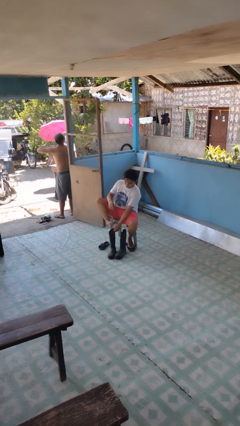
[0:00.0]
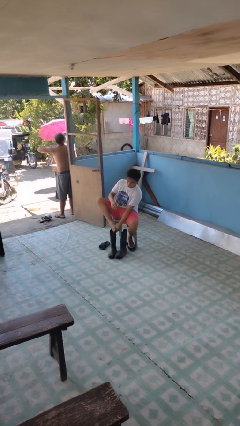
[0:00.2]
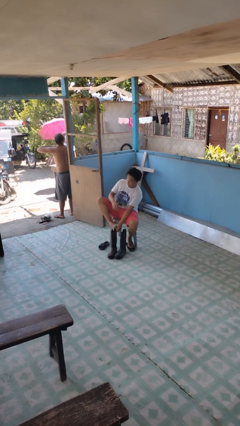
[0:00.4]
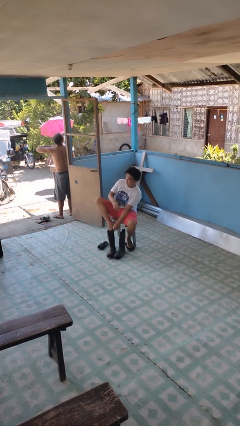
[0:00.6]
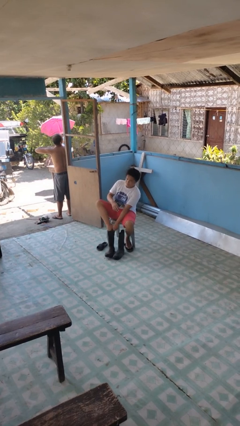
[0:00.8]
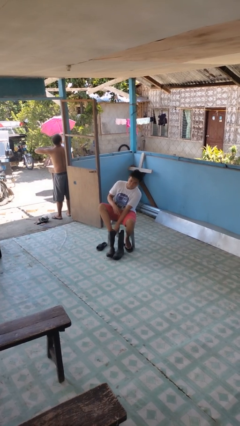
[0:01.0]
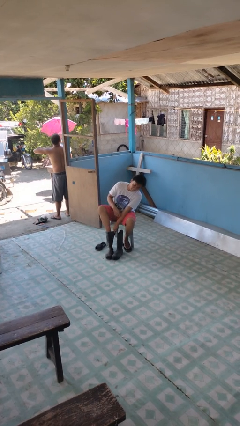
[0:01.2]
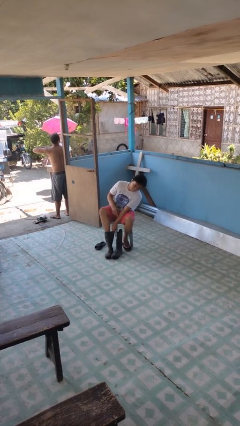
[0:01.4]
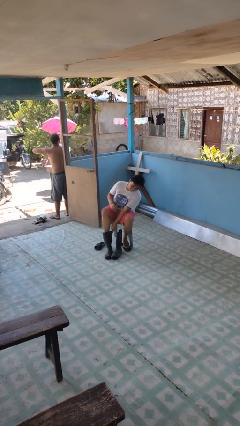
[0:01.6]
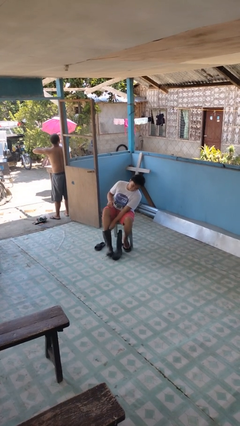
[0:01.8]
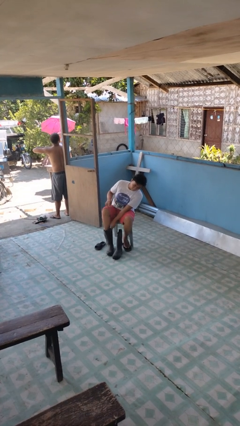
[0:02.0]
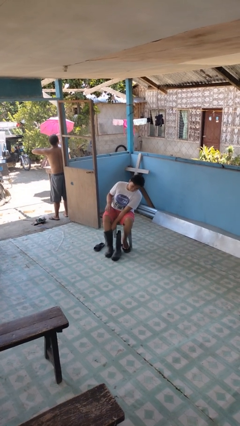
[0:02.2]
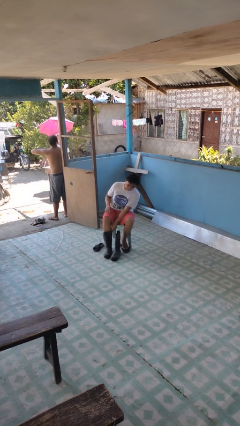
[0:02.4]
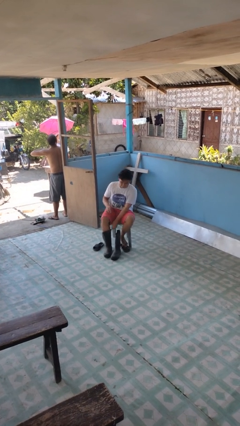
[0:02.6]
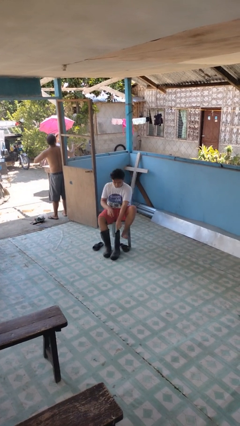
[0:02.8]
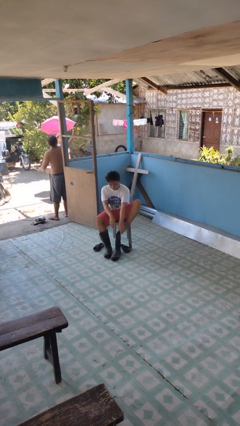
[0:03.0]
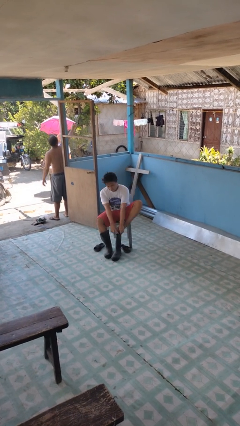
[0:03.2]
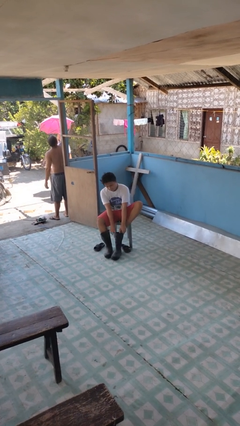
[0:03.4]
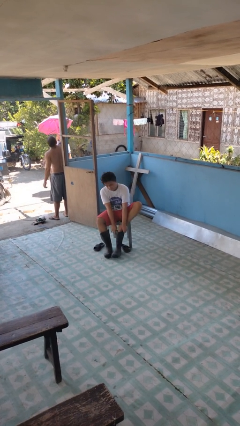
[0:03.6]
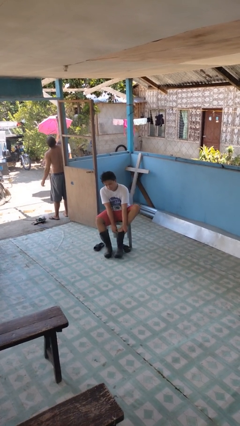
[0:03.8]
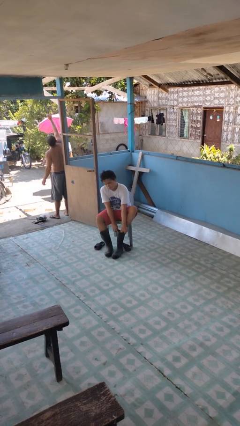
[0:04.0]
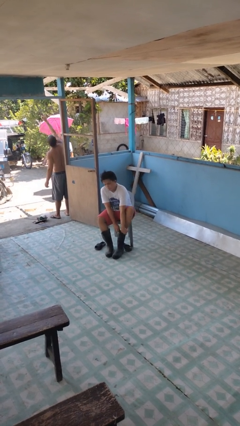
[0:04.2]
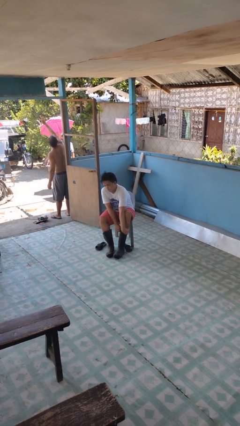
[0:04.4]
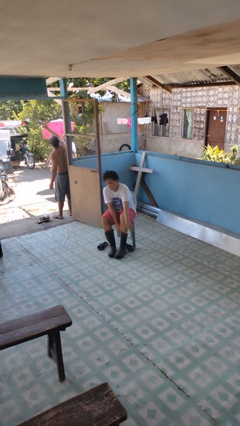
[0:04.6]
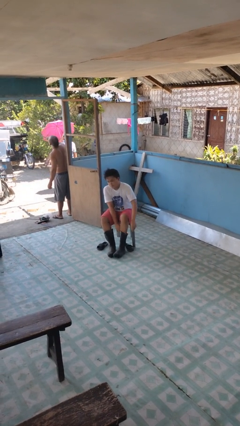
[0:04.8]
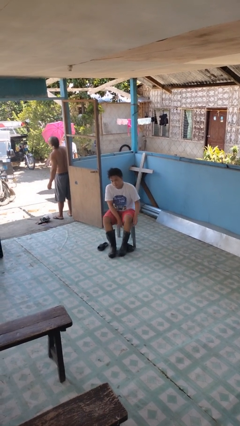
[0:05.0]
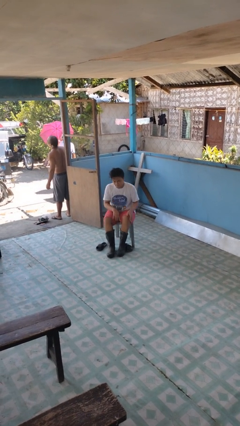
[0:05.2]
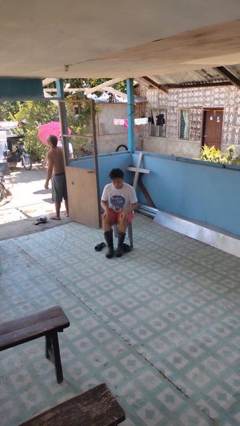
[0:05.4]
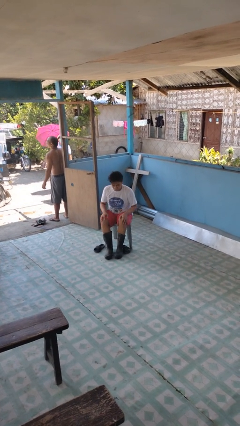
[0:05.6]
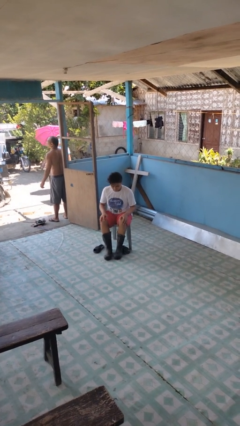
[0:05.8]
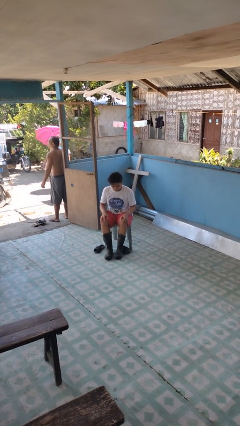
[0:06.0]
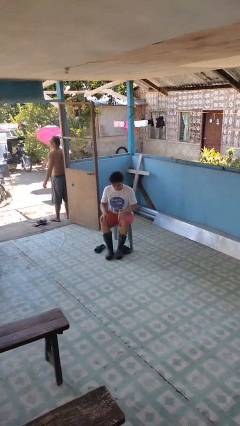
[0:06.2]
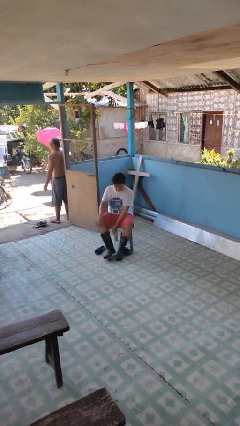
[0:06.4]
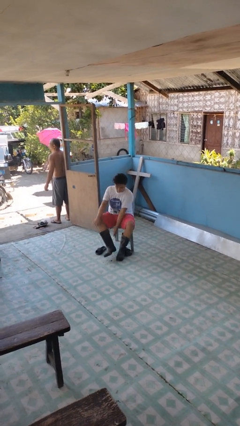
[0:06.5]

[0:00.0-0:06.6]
person puts on boots

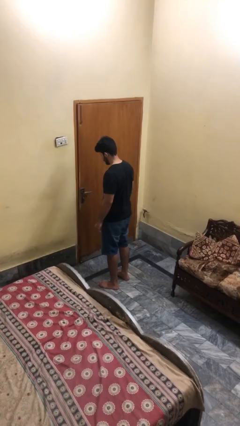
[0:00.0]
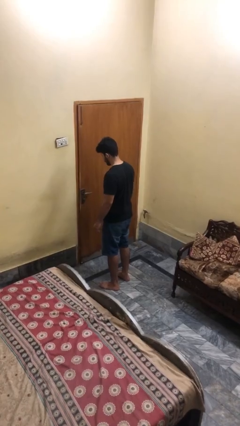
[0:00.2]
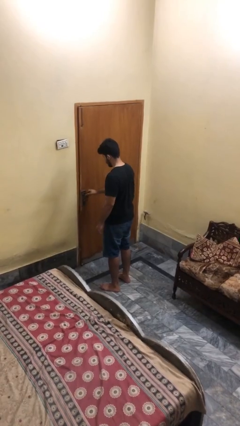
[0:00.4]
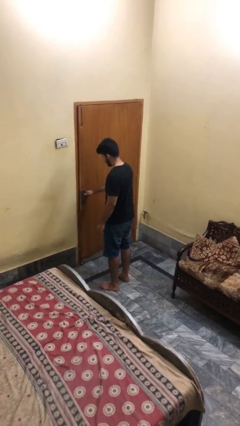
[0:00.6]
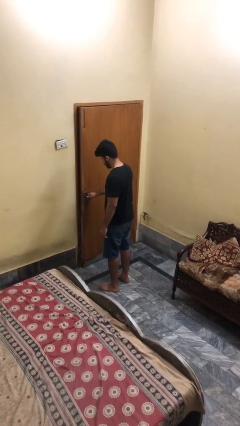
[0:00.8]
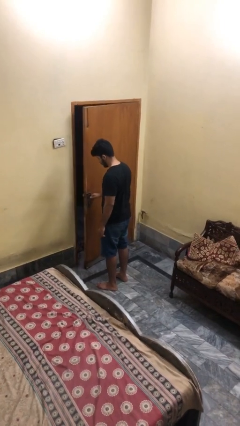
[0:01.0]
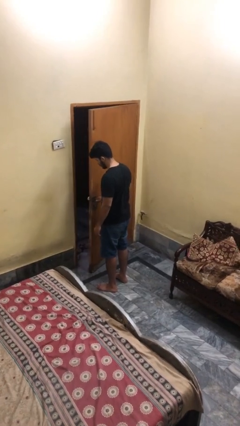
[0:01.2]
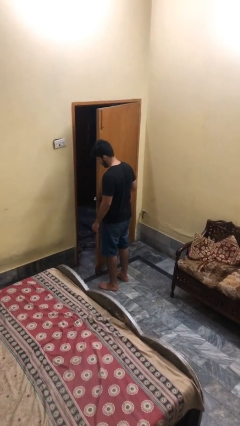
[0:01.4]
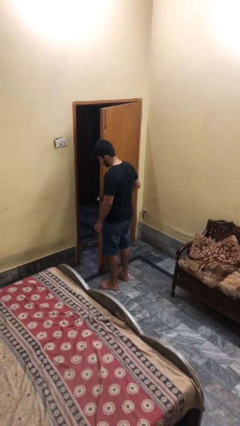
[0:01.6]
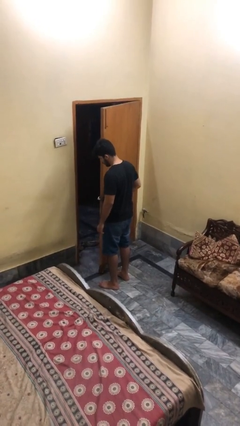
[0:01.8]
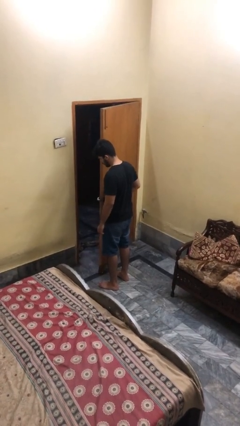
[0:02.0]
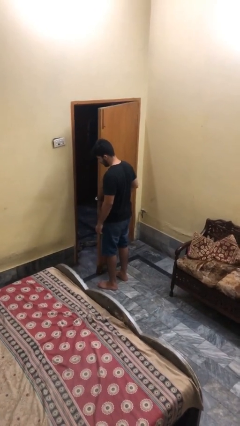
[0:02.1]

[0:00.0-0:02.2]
person opens facility door

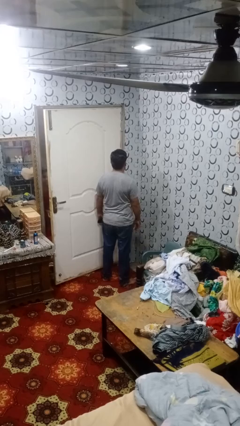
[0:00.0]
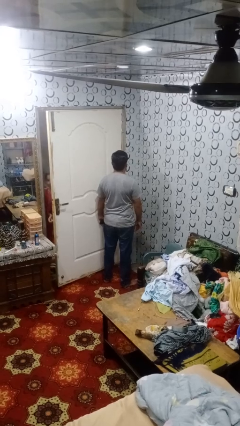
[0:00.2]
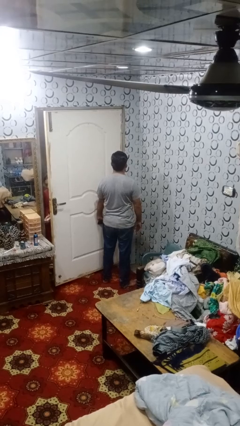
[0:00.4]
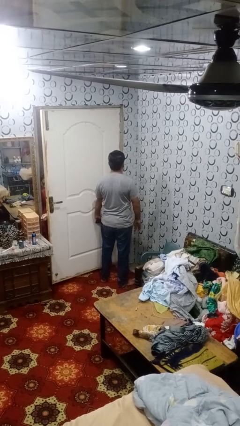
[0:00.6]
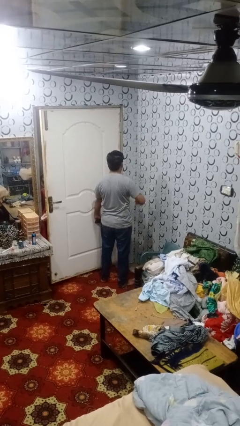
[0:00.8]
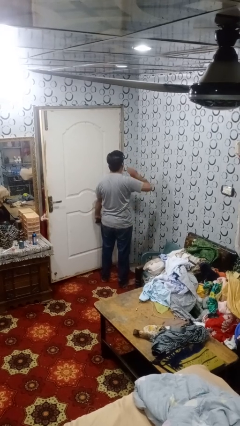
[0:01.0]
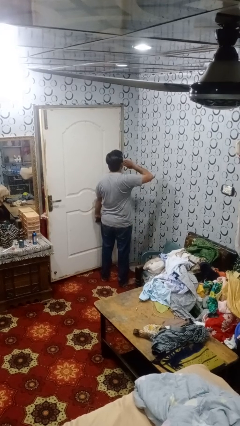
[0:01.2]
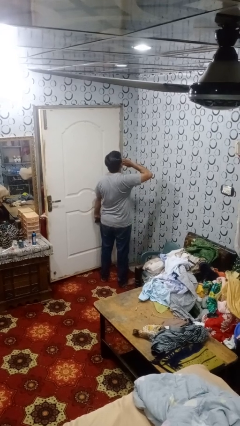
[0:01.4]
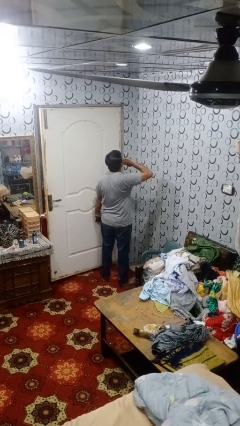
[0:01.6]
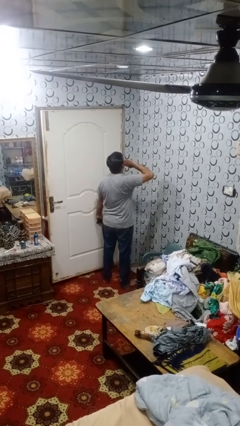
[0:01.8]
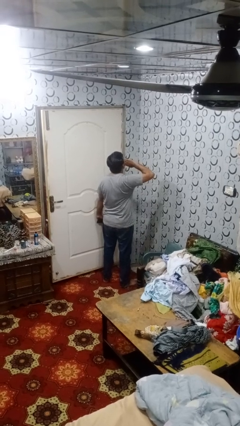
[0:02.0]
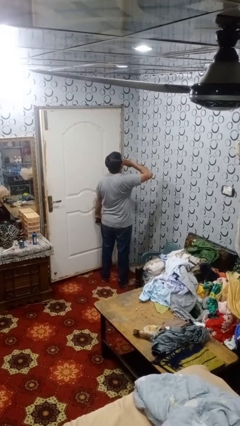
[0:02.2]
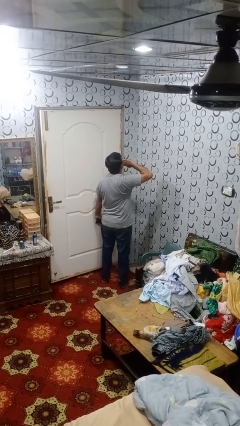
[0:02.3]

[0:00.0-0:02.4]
person yawns

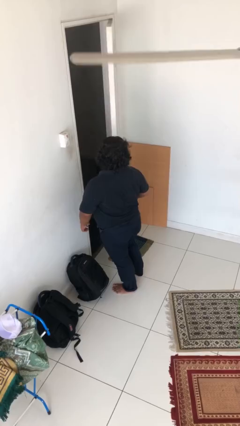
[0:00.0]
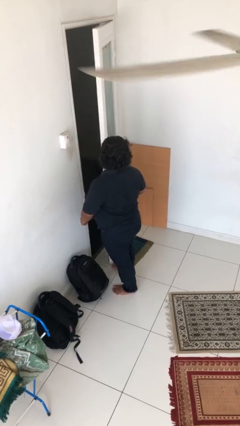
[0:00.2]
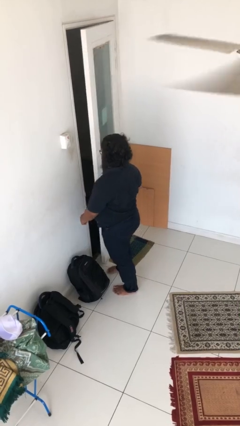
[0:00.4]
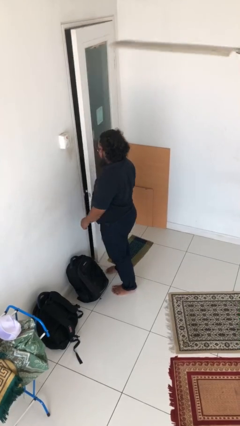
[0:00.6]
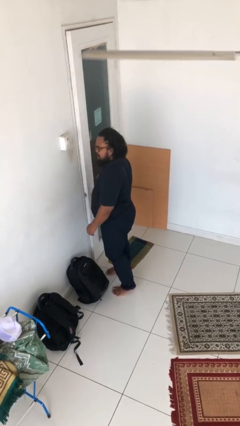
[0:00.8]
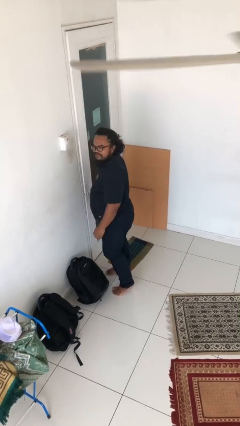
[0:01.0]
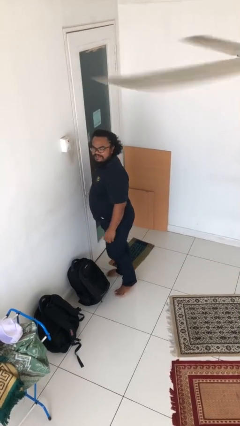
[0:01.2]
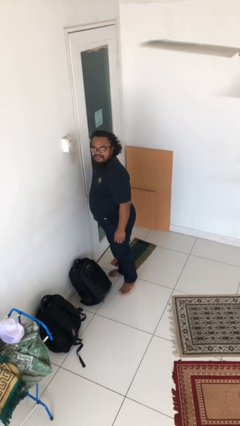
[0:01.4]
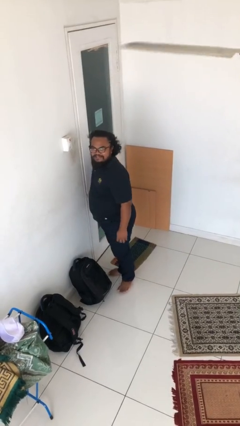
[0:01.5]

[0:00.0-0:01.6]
person closes facility door

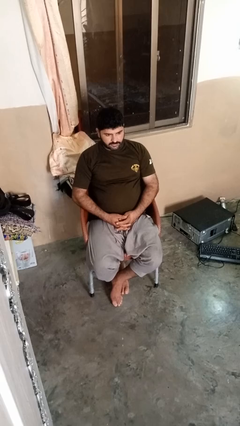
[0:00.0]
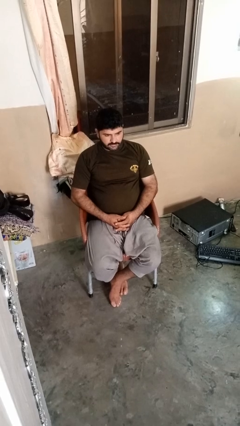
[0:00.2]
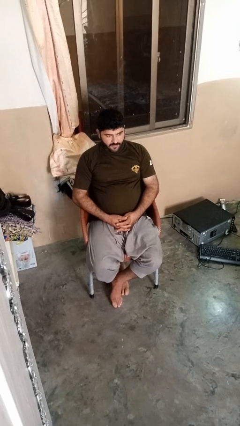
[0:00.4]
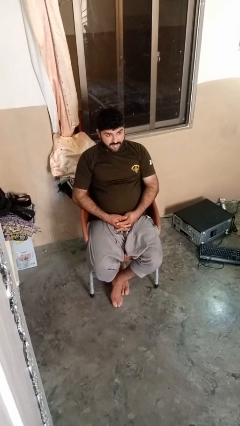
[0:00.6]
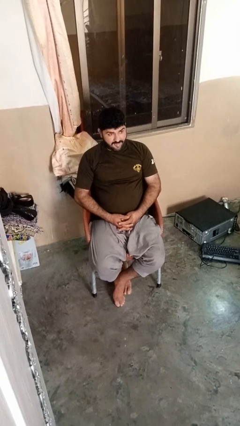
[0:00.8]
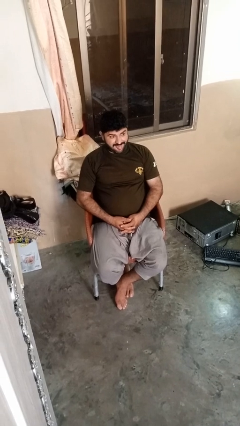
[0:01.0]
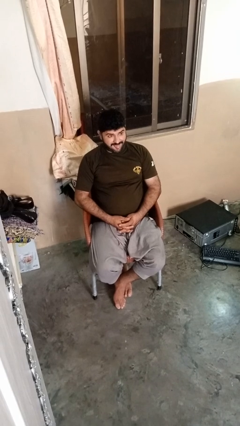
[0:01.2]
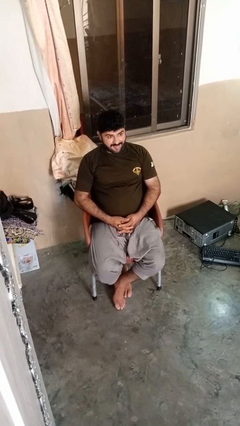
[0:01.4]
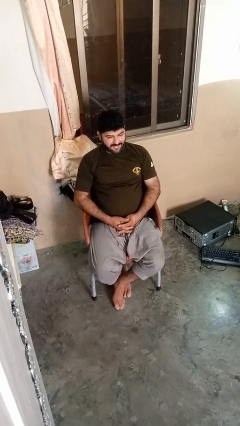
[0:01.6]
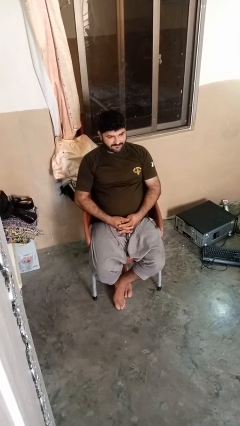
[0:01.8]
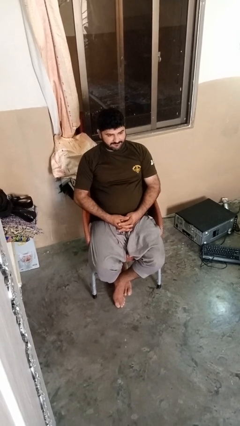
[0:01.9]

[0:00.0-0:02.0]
person sticks out tongue

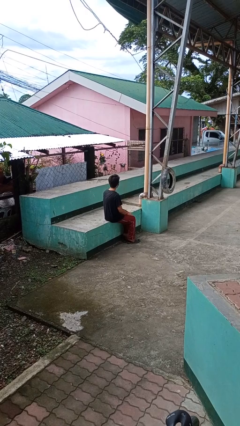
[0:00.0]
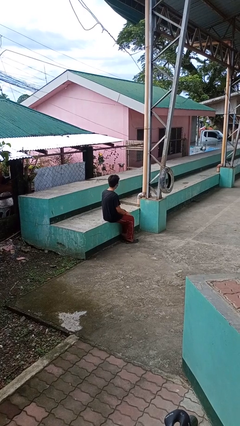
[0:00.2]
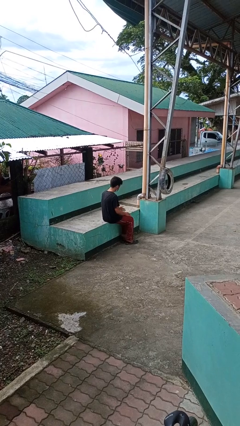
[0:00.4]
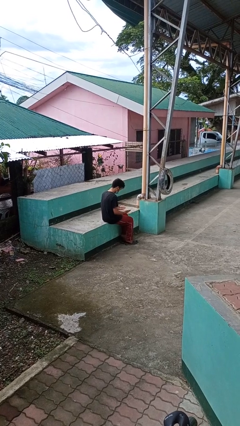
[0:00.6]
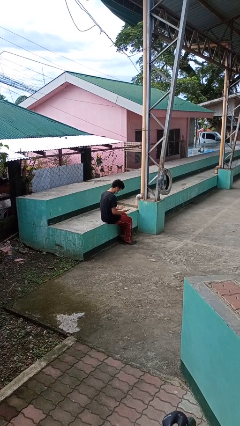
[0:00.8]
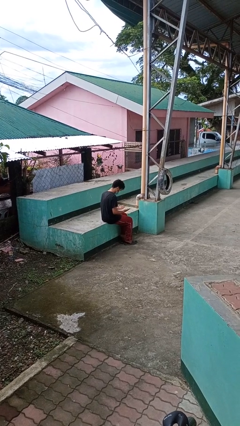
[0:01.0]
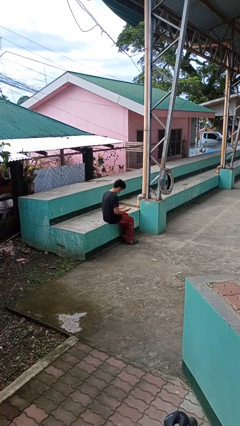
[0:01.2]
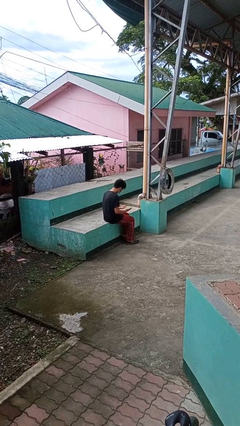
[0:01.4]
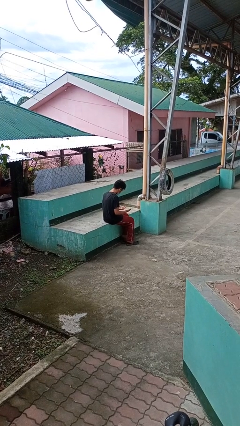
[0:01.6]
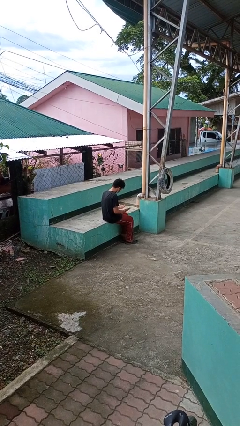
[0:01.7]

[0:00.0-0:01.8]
person looks at hands in lap

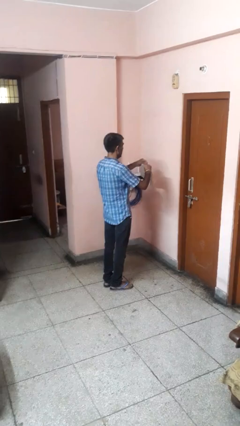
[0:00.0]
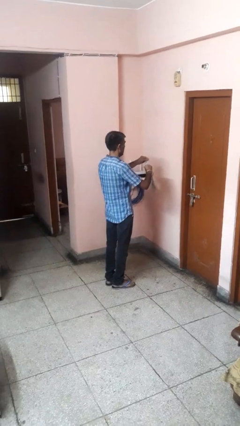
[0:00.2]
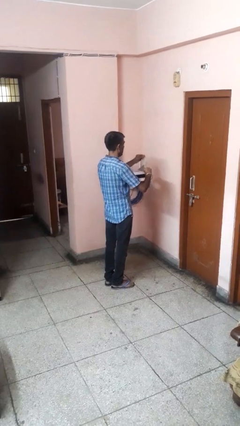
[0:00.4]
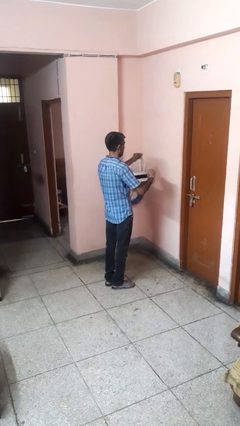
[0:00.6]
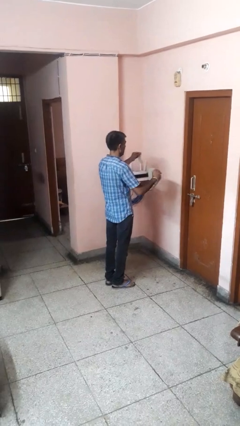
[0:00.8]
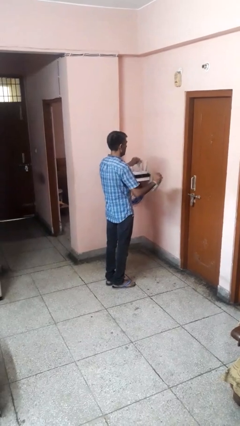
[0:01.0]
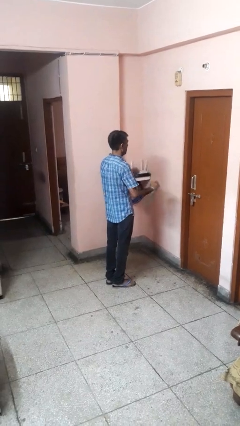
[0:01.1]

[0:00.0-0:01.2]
person tears paper
